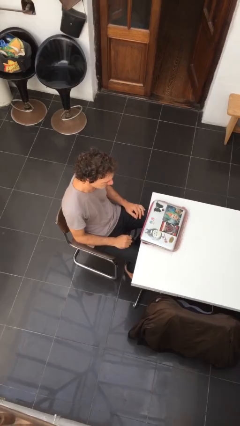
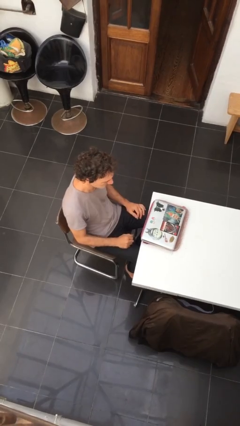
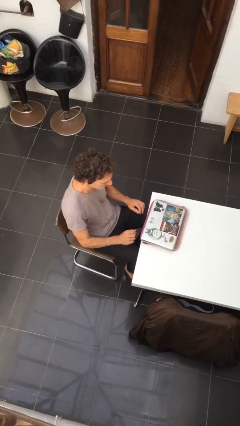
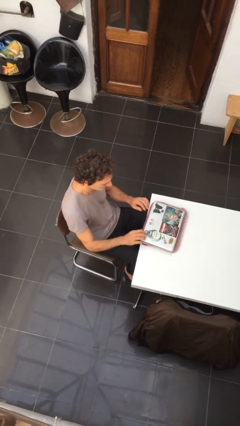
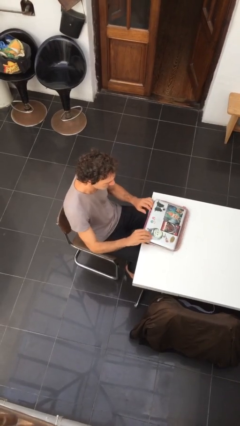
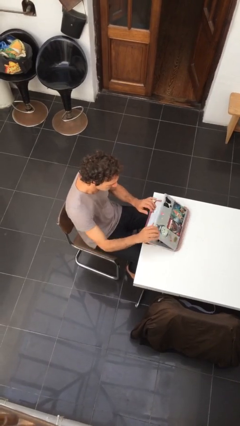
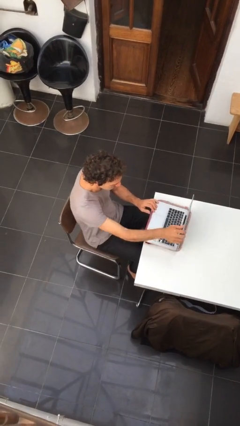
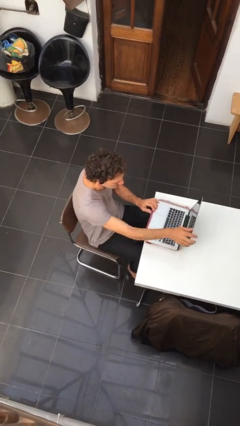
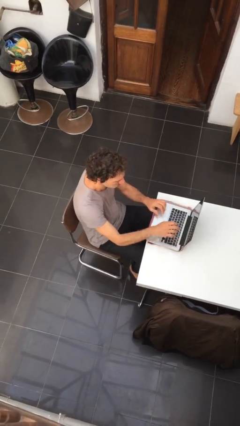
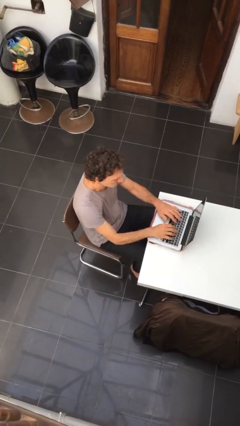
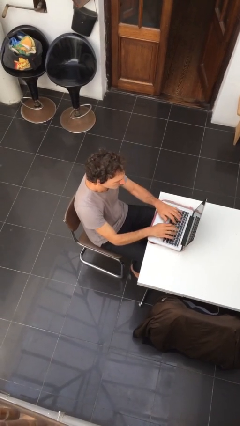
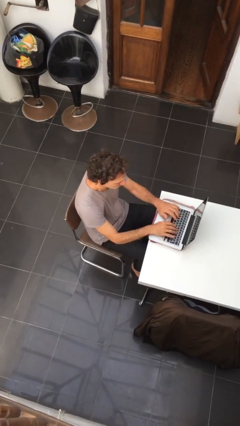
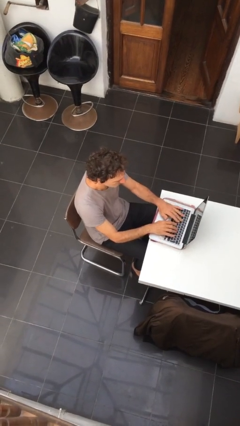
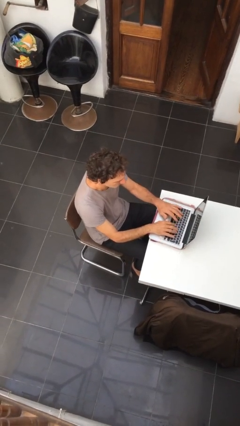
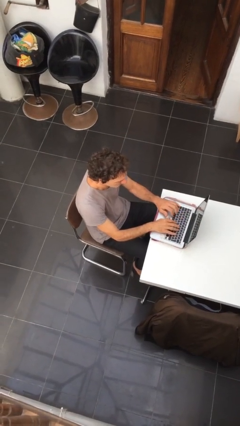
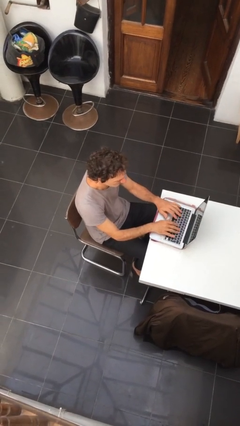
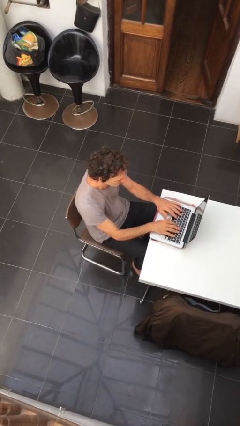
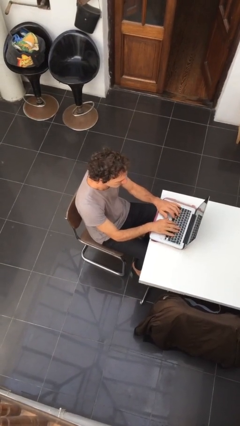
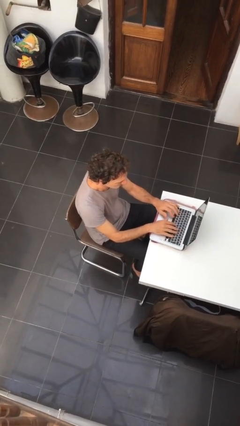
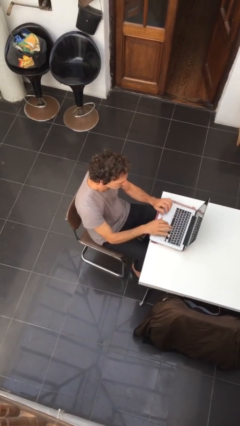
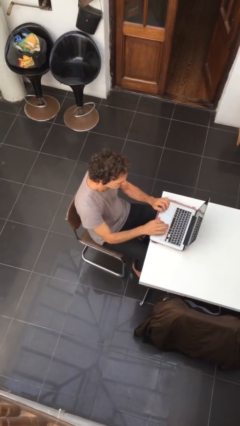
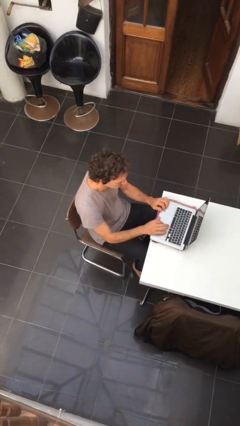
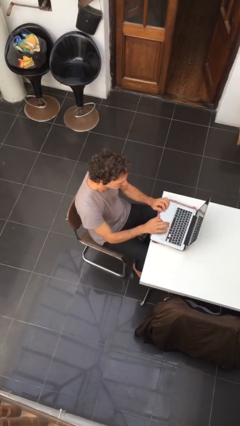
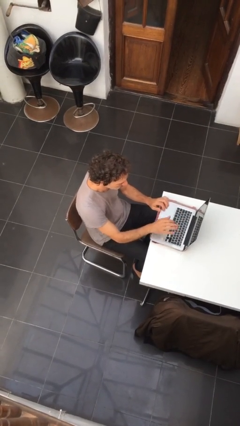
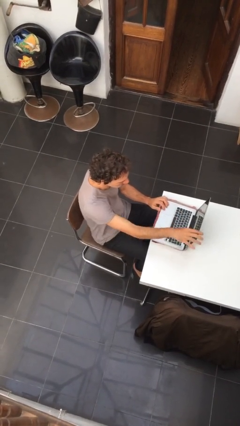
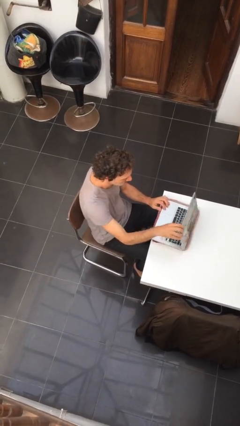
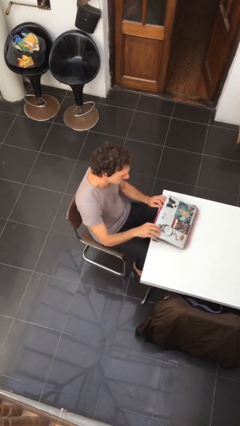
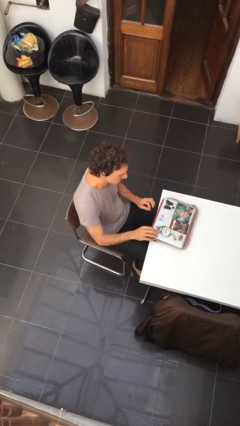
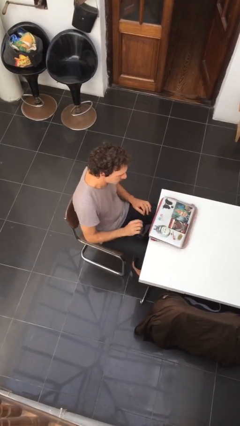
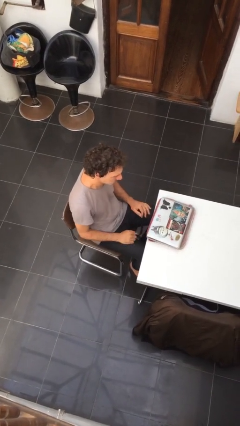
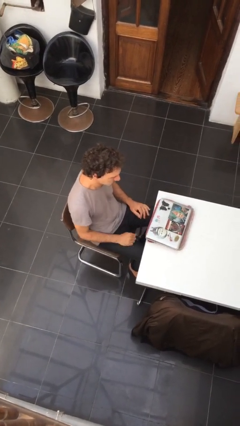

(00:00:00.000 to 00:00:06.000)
person interacts with laptop

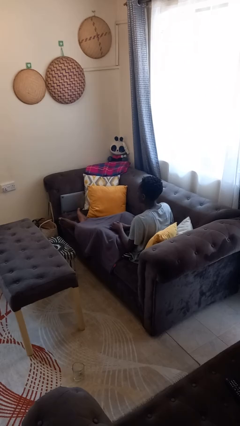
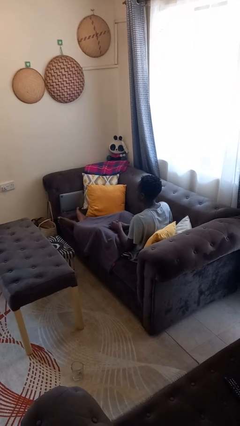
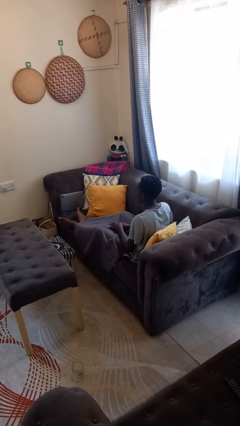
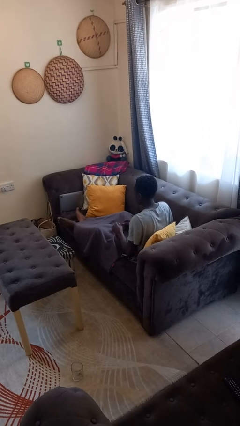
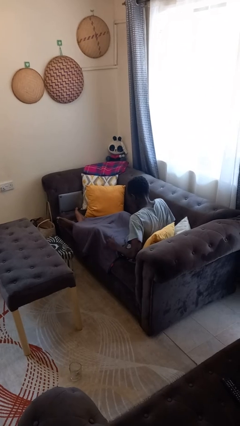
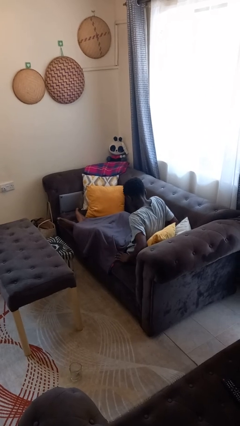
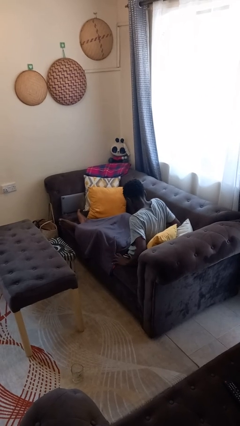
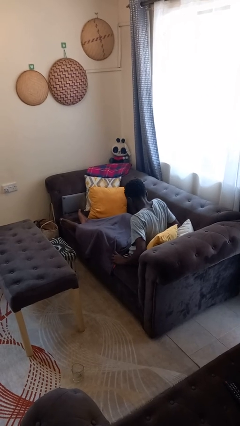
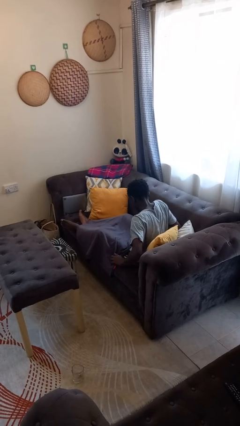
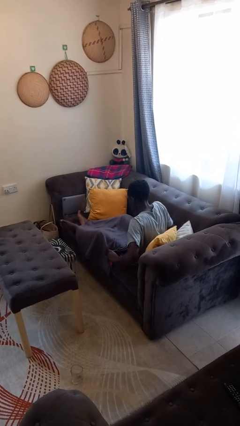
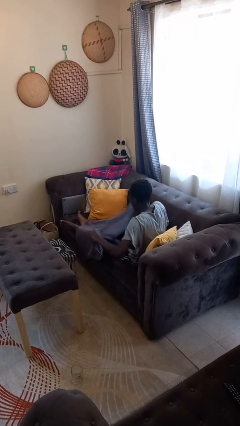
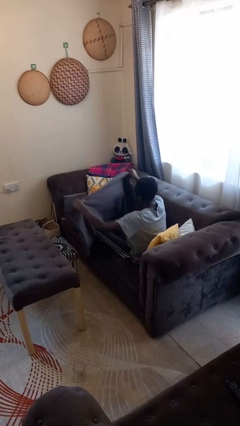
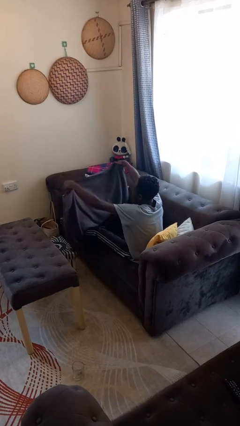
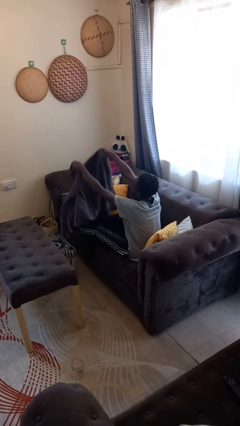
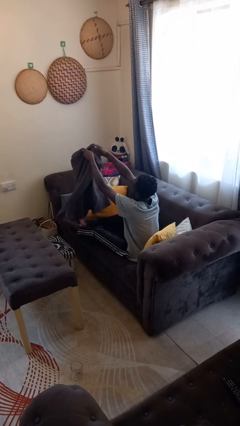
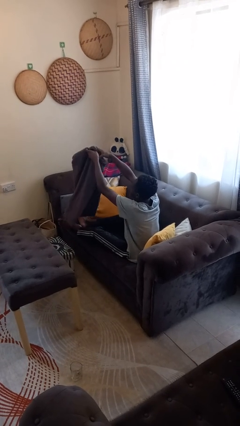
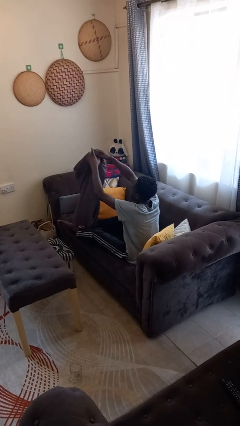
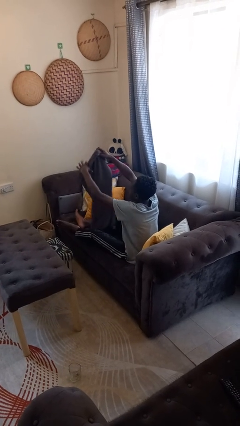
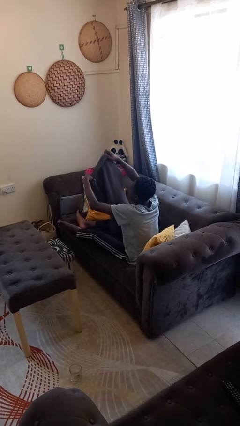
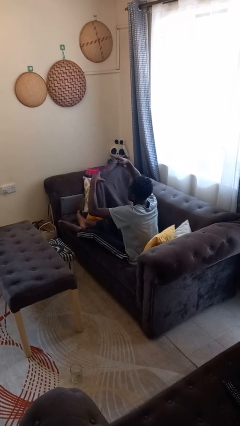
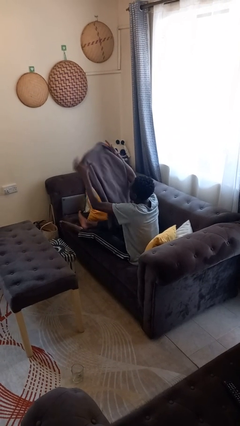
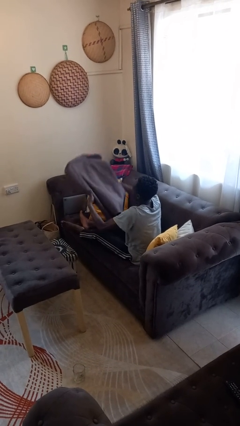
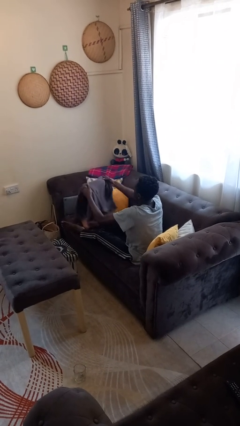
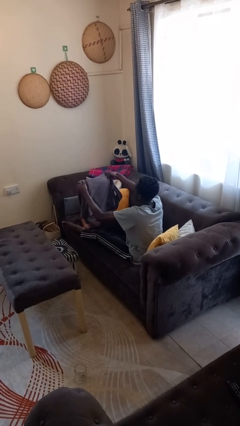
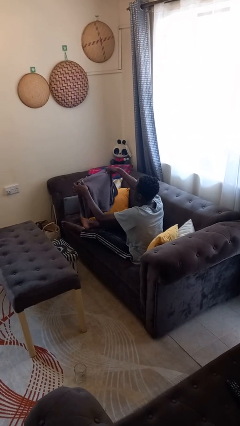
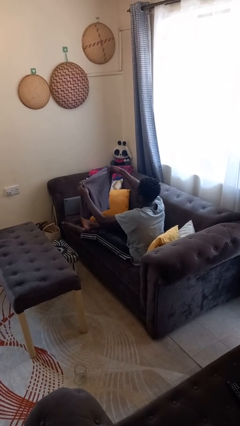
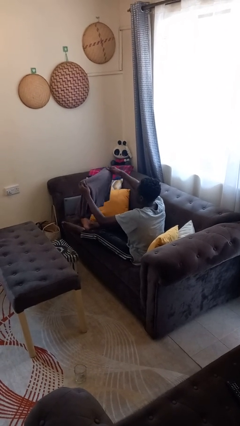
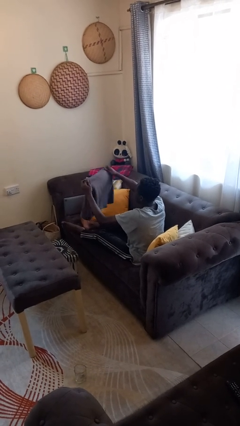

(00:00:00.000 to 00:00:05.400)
person folds blanket

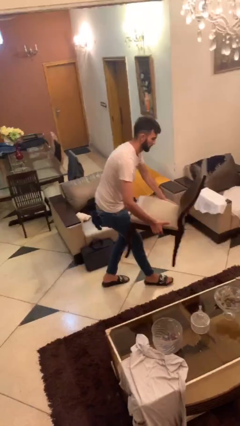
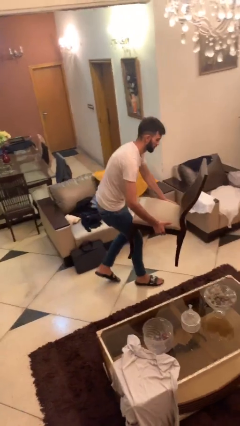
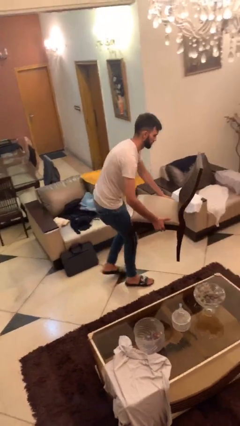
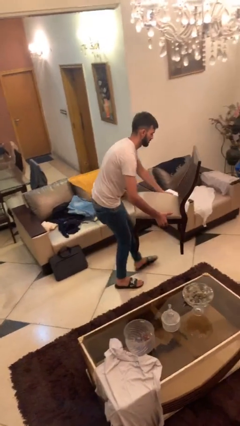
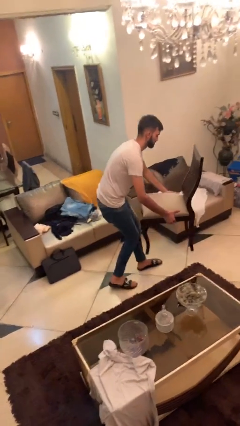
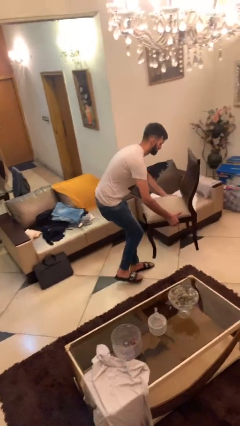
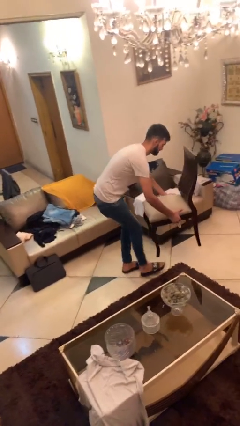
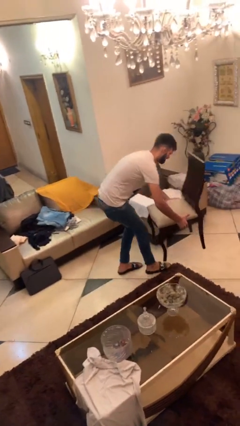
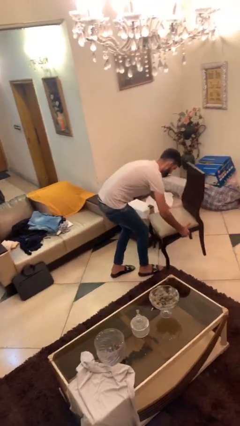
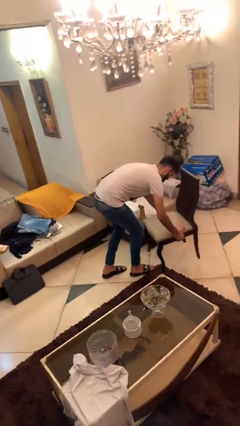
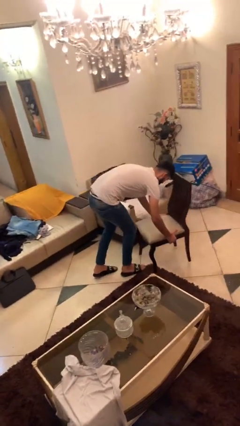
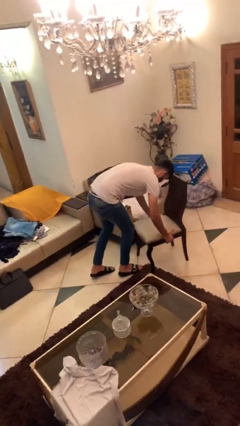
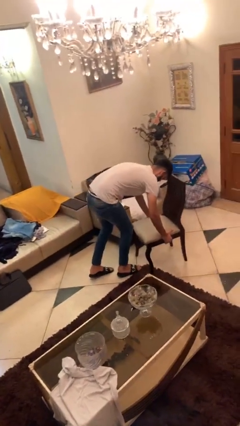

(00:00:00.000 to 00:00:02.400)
person puts down object on floor

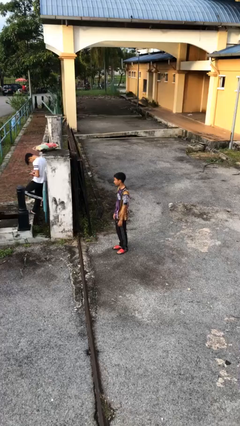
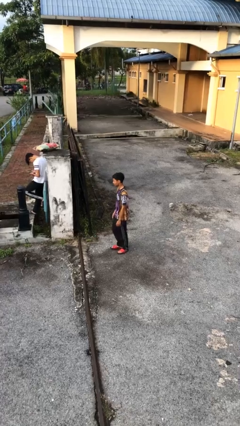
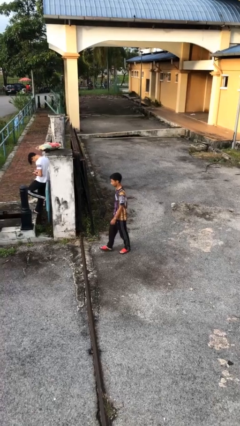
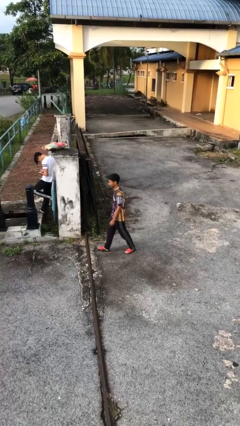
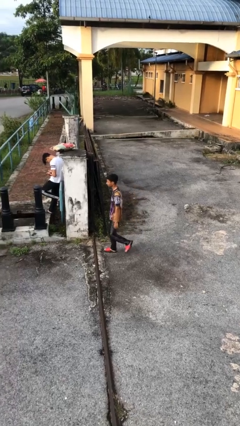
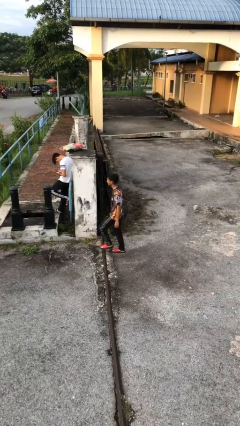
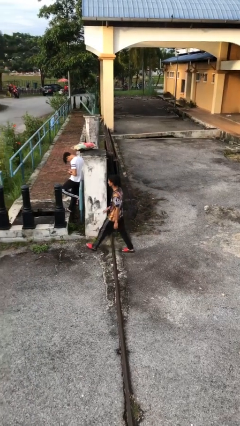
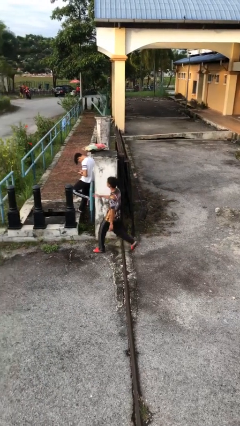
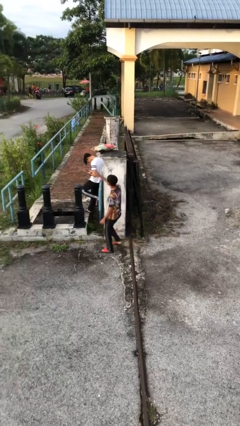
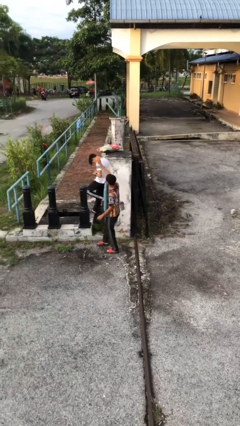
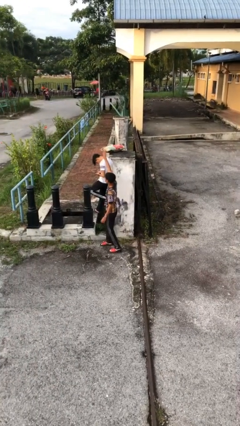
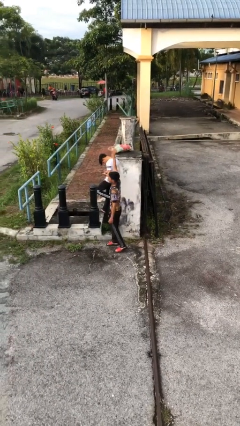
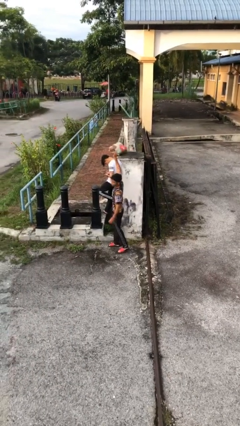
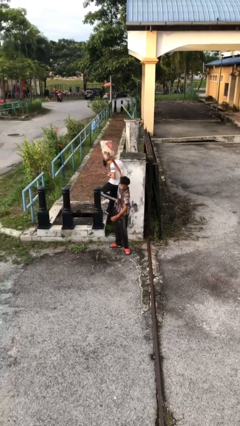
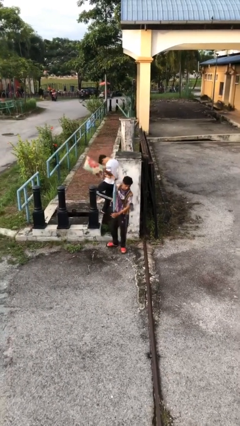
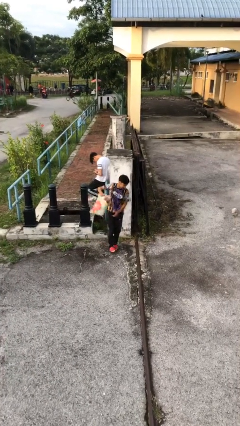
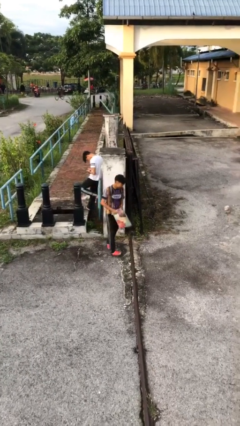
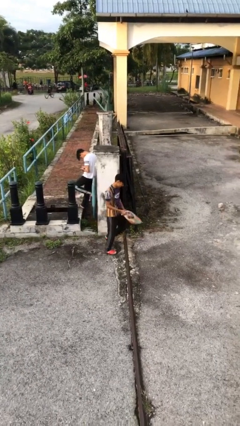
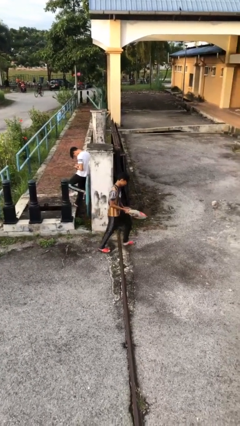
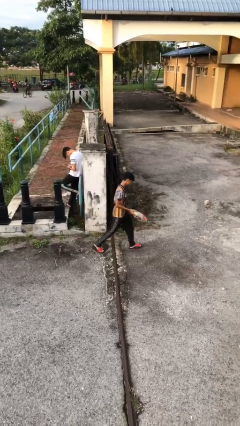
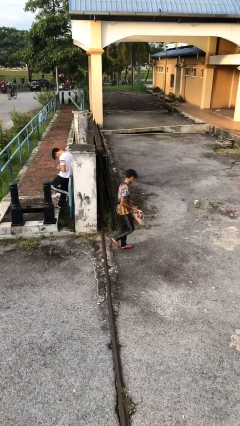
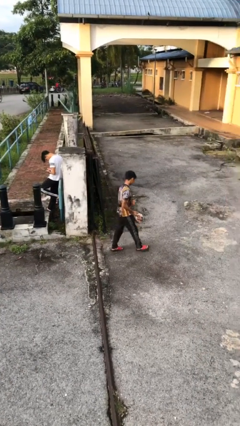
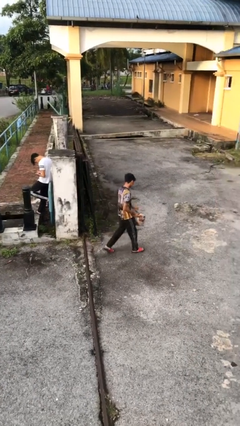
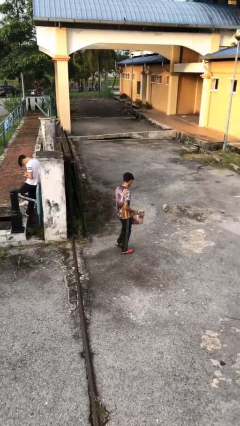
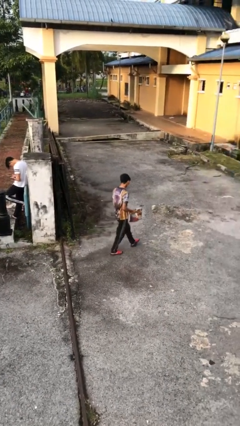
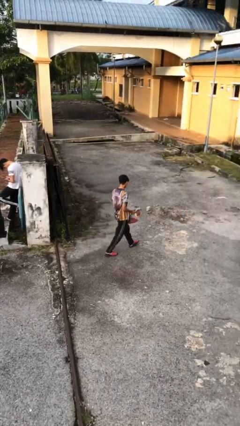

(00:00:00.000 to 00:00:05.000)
person steals object from person
